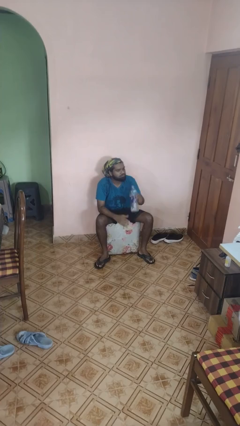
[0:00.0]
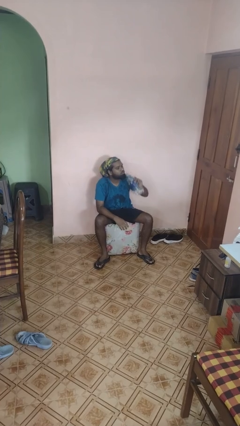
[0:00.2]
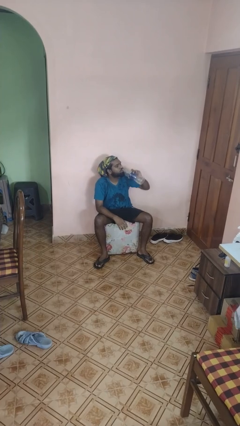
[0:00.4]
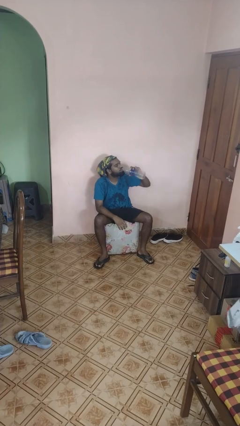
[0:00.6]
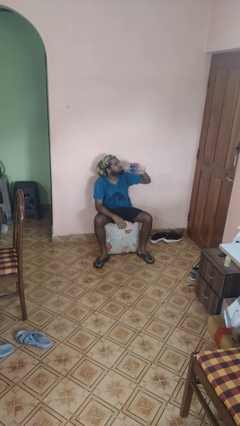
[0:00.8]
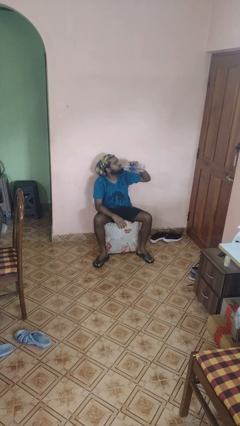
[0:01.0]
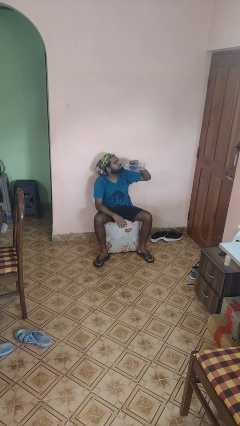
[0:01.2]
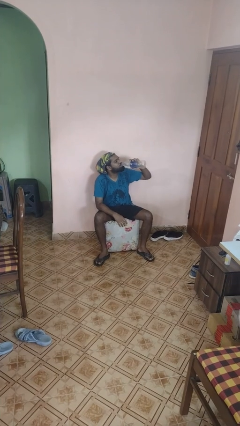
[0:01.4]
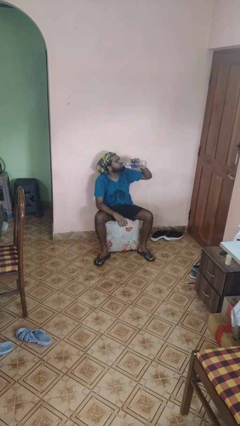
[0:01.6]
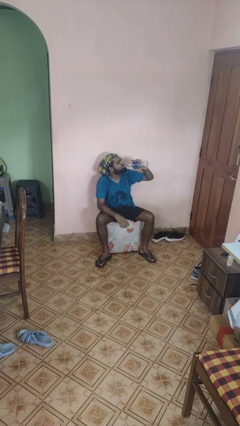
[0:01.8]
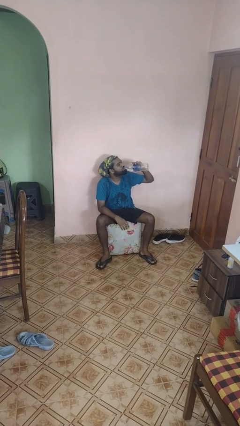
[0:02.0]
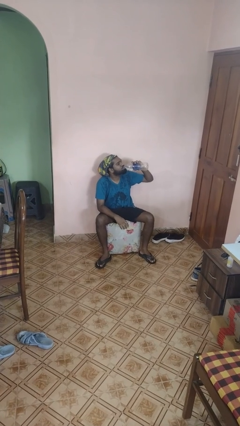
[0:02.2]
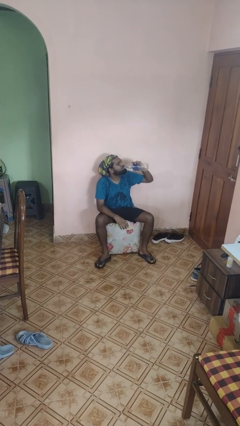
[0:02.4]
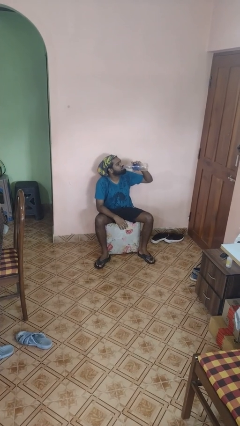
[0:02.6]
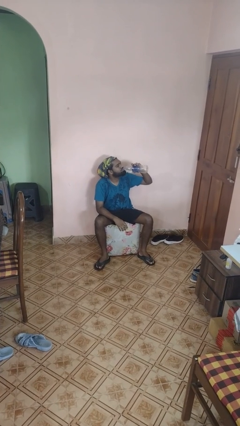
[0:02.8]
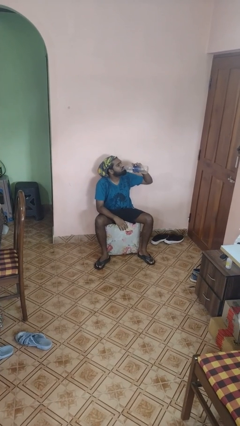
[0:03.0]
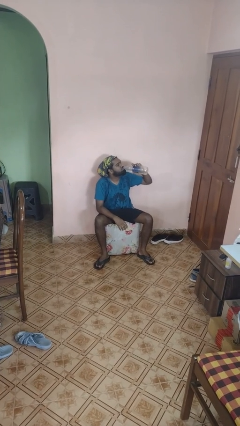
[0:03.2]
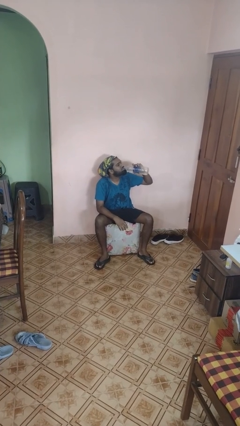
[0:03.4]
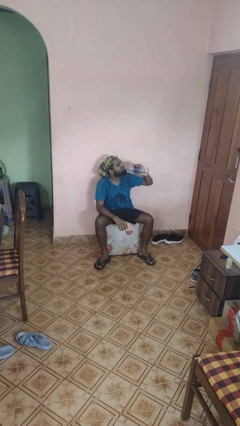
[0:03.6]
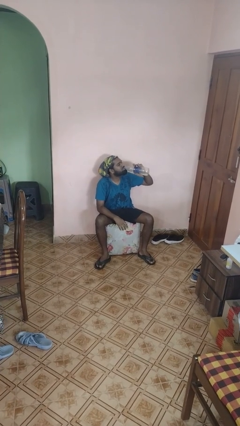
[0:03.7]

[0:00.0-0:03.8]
person drinks from bottle

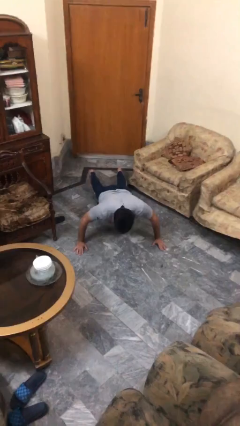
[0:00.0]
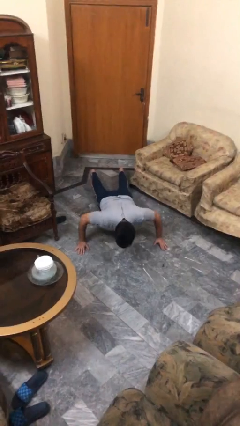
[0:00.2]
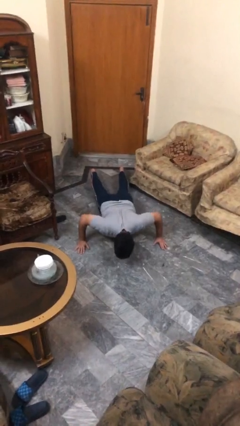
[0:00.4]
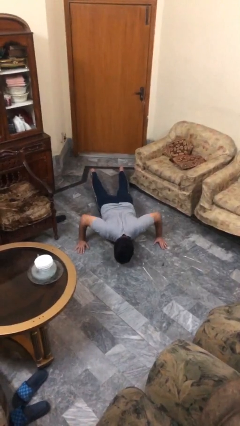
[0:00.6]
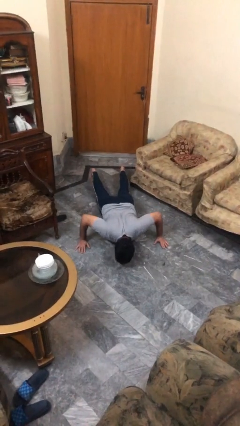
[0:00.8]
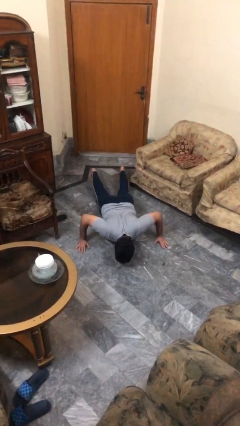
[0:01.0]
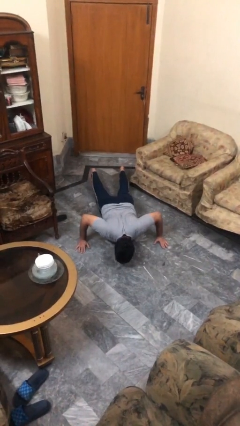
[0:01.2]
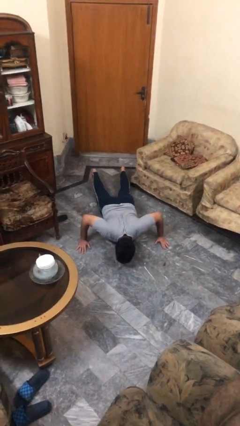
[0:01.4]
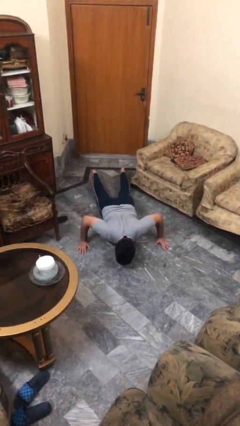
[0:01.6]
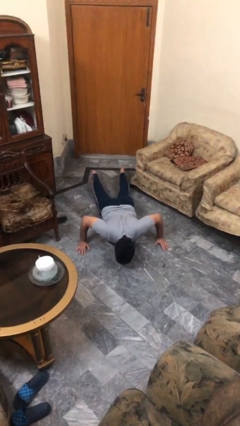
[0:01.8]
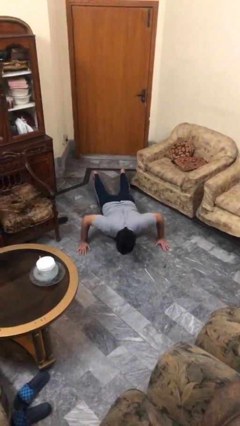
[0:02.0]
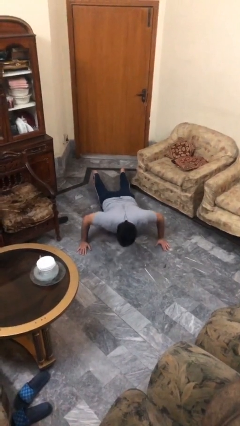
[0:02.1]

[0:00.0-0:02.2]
person exercises with pushup

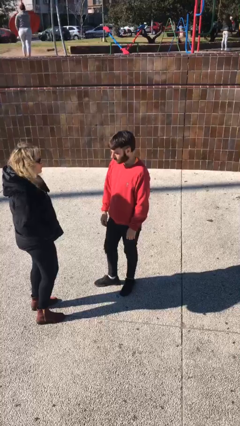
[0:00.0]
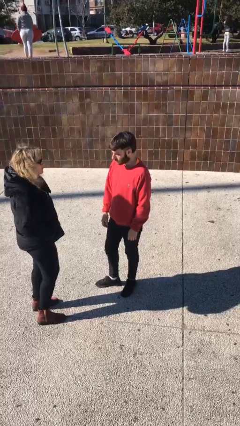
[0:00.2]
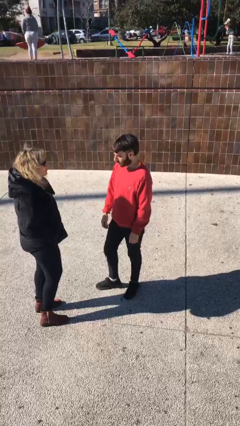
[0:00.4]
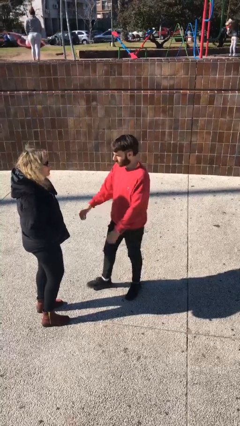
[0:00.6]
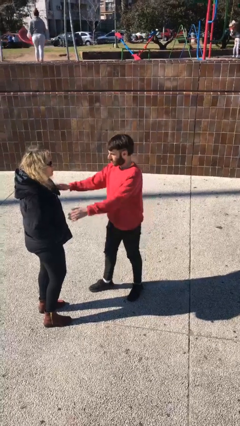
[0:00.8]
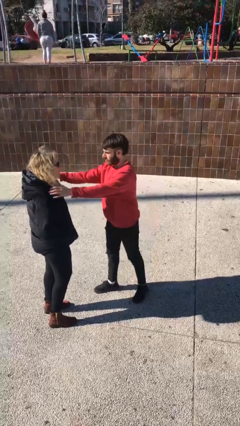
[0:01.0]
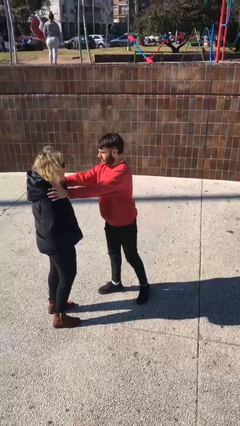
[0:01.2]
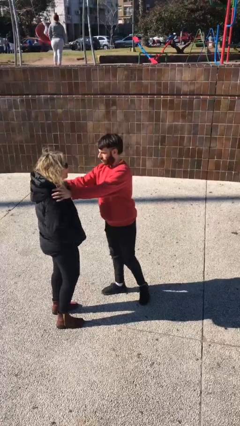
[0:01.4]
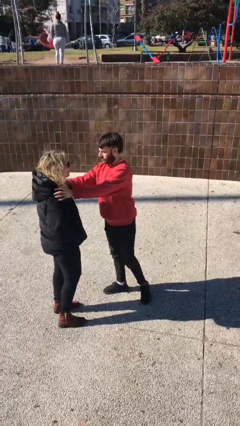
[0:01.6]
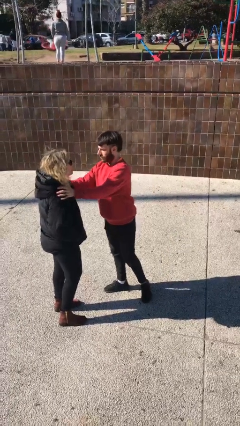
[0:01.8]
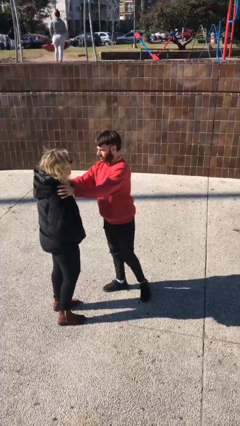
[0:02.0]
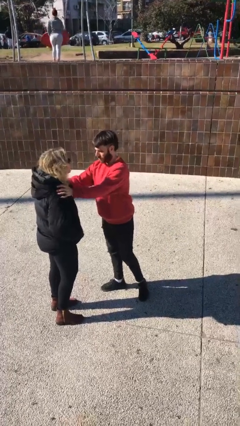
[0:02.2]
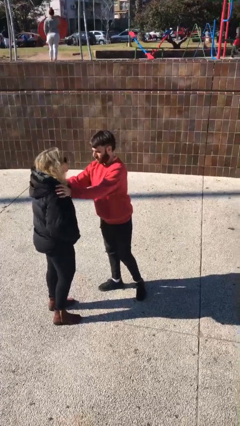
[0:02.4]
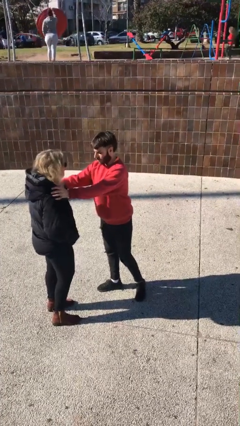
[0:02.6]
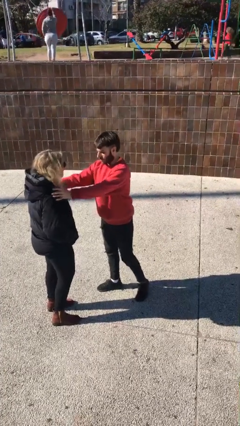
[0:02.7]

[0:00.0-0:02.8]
person pounds shoulders of person

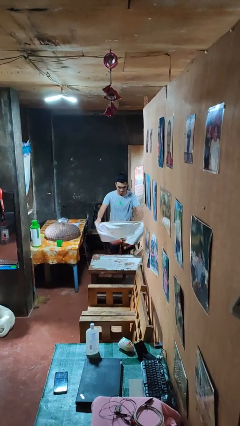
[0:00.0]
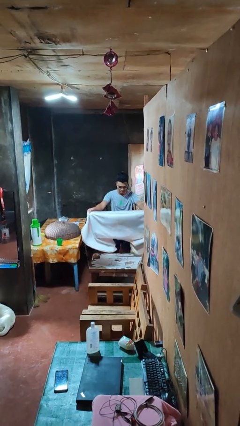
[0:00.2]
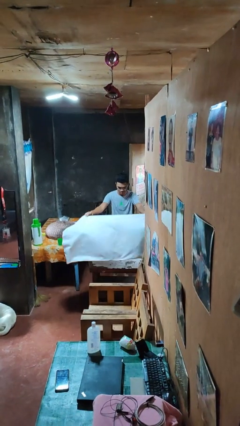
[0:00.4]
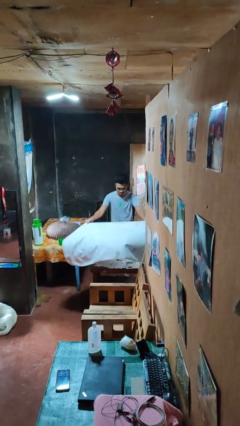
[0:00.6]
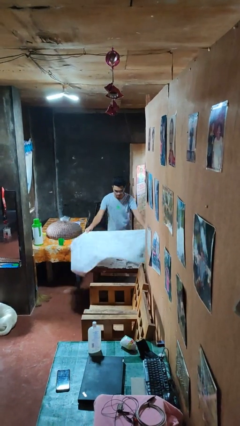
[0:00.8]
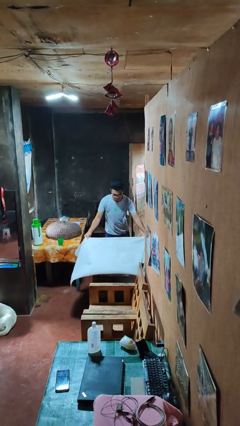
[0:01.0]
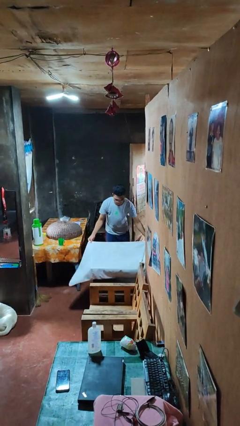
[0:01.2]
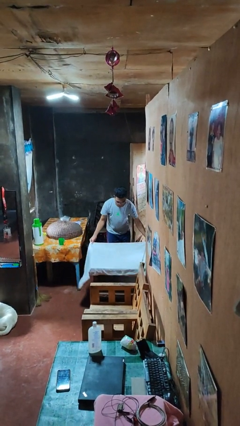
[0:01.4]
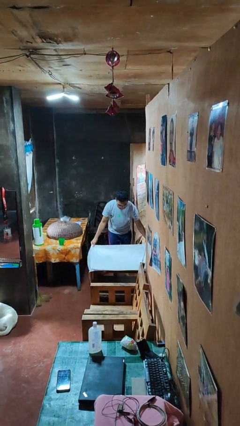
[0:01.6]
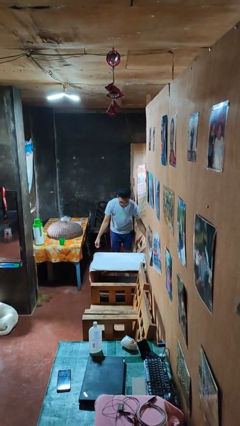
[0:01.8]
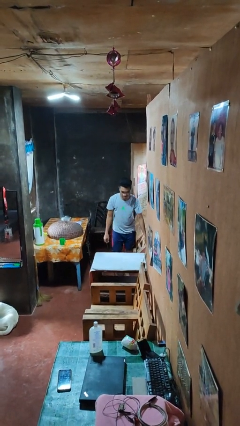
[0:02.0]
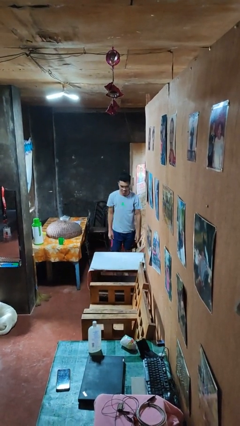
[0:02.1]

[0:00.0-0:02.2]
person spreads tablecloth

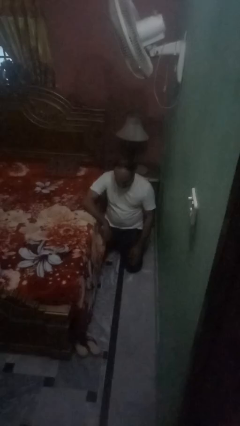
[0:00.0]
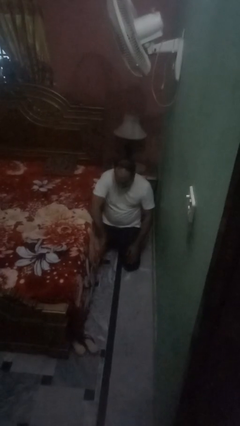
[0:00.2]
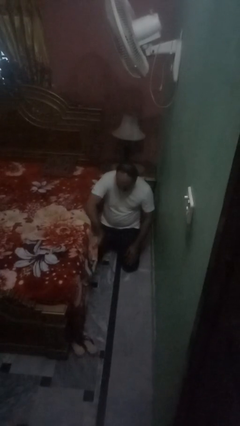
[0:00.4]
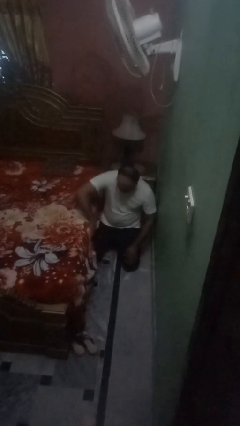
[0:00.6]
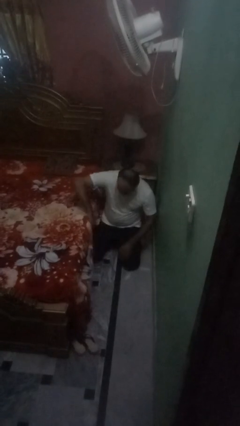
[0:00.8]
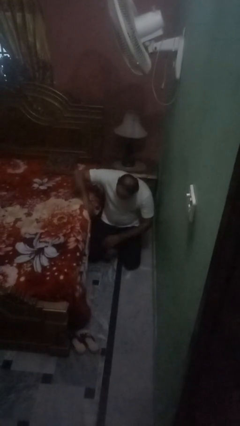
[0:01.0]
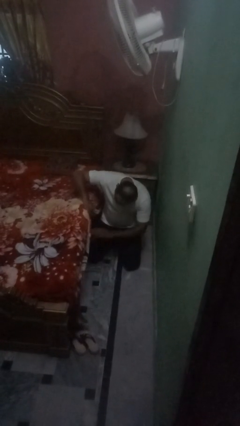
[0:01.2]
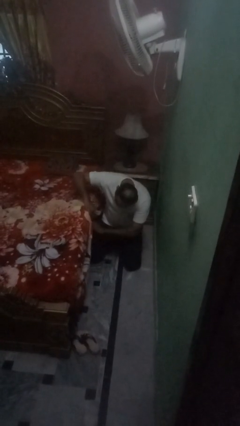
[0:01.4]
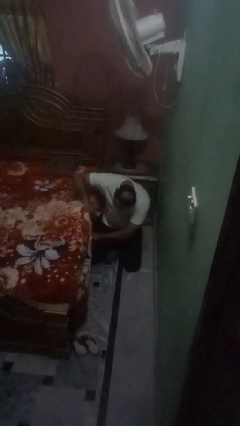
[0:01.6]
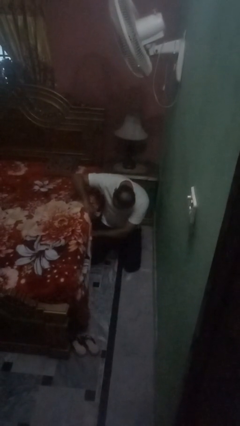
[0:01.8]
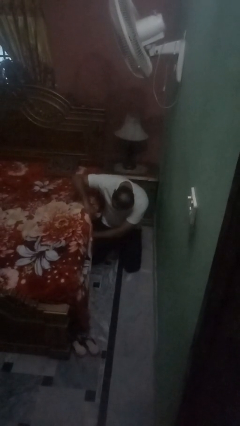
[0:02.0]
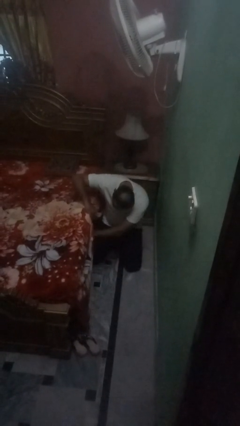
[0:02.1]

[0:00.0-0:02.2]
person searches under bed

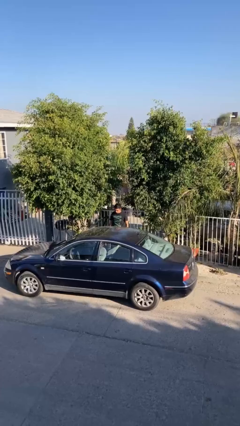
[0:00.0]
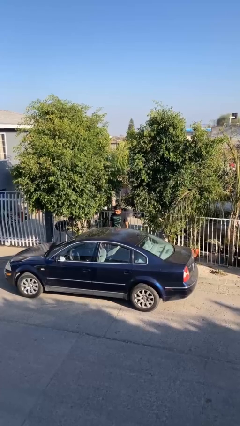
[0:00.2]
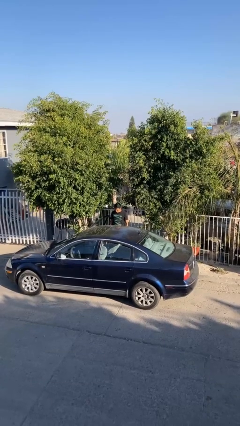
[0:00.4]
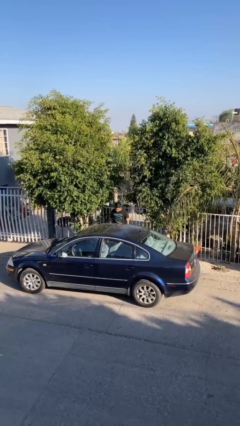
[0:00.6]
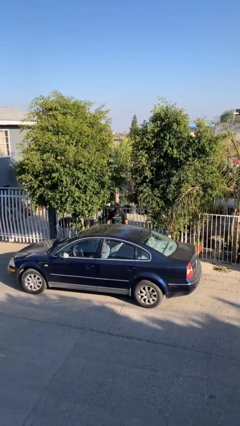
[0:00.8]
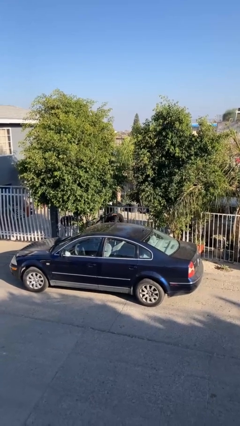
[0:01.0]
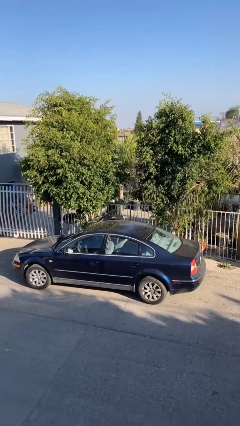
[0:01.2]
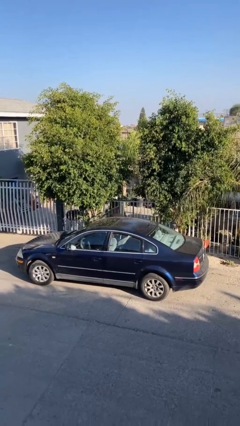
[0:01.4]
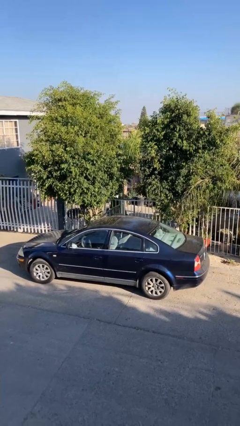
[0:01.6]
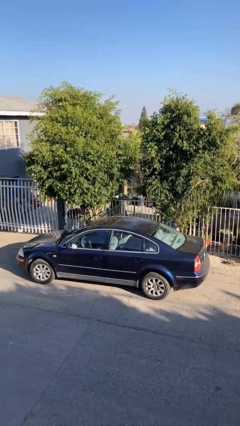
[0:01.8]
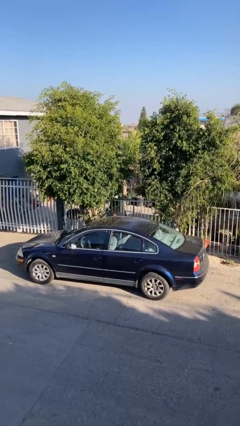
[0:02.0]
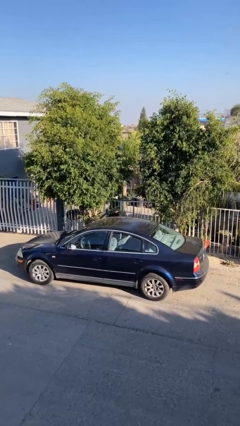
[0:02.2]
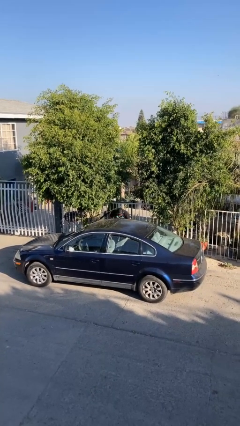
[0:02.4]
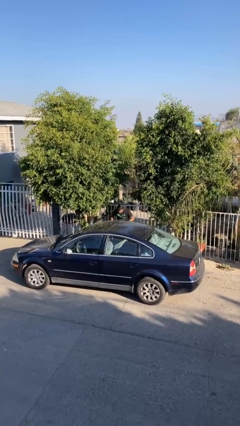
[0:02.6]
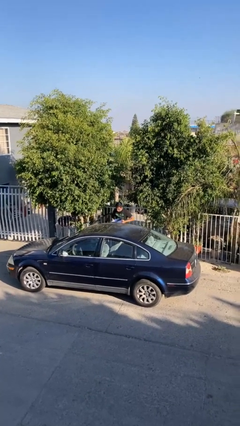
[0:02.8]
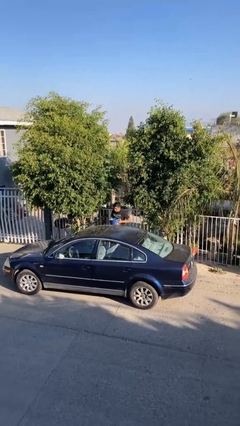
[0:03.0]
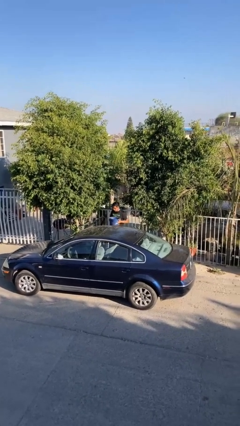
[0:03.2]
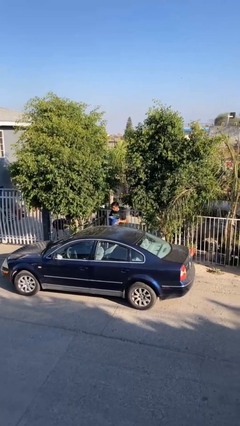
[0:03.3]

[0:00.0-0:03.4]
person unloads car

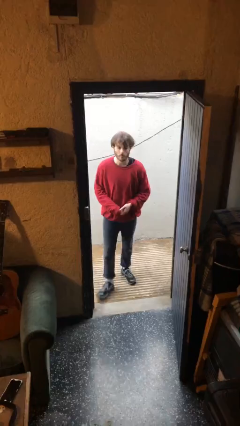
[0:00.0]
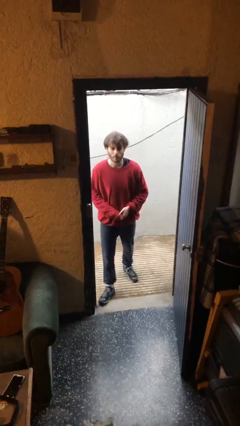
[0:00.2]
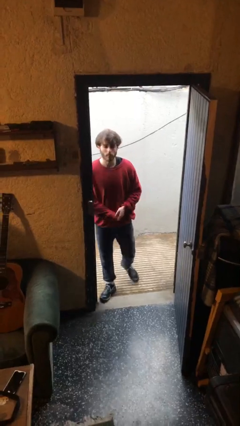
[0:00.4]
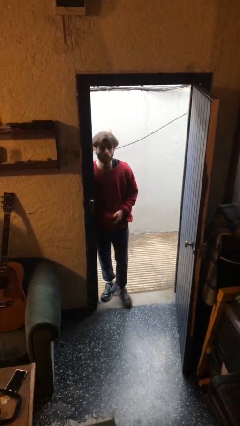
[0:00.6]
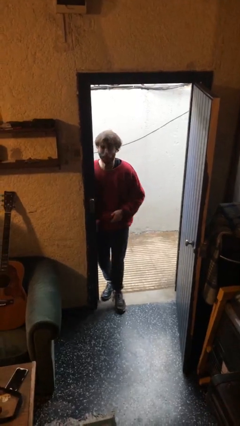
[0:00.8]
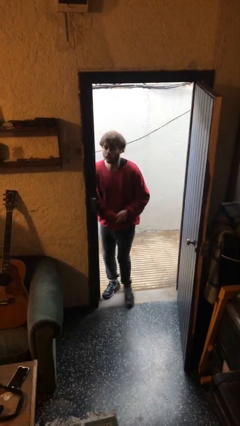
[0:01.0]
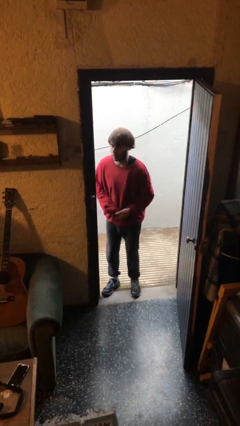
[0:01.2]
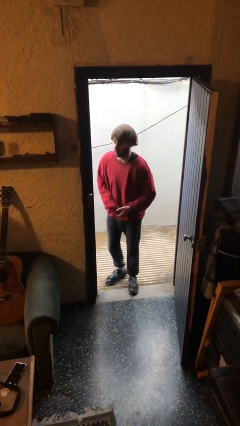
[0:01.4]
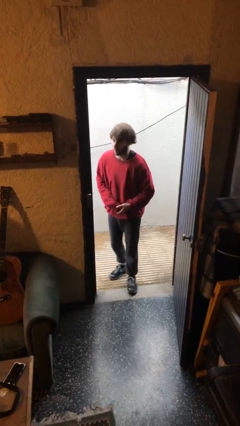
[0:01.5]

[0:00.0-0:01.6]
person bumps into wall
